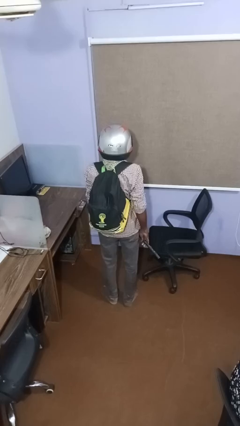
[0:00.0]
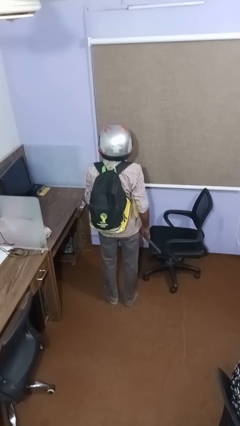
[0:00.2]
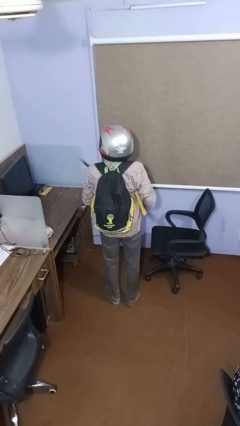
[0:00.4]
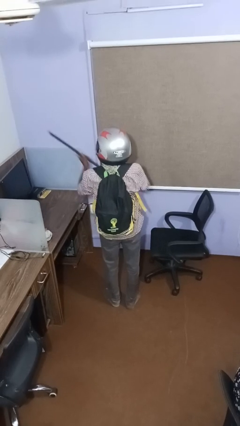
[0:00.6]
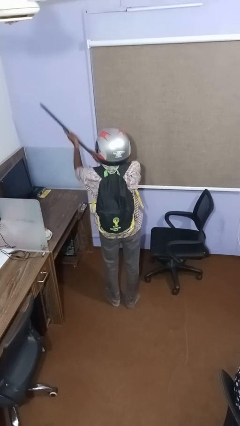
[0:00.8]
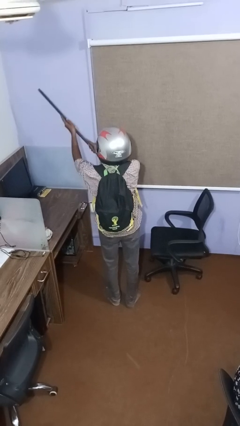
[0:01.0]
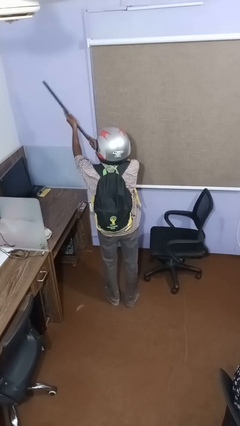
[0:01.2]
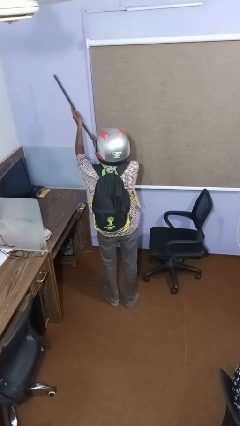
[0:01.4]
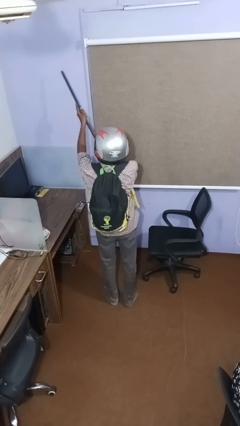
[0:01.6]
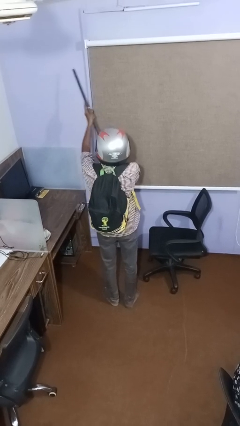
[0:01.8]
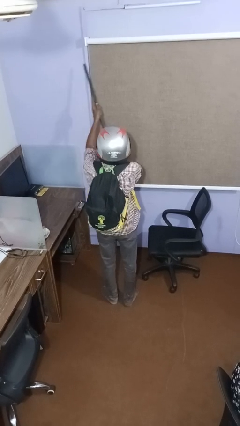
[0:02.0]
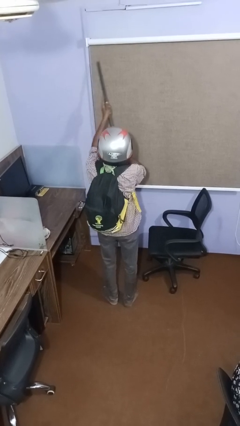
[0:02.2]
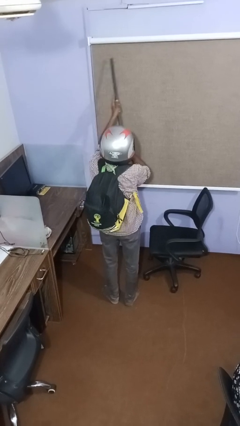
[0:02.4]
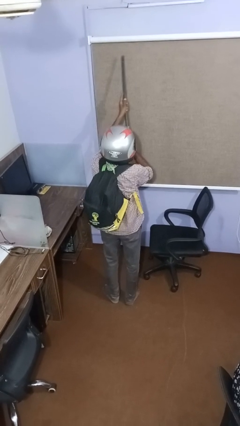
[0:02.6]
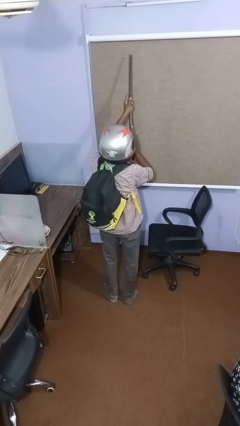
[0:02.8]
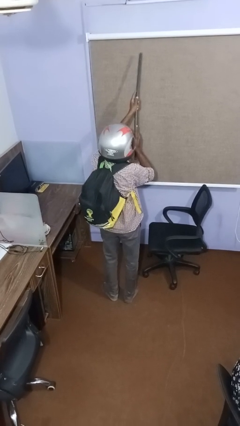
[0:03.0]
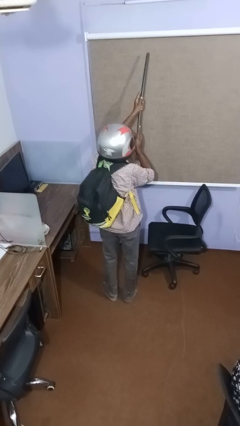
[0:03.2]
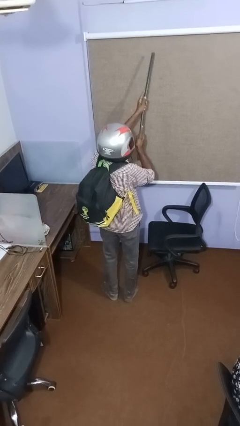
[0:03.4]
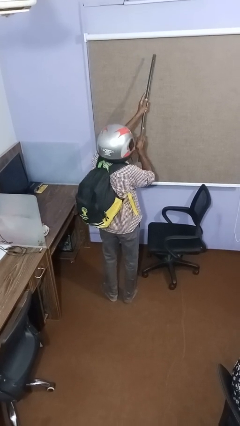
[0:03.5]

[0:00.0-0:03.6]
person swats bug

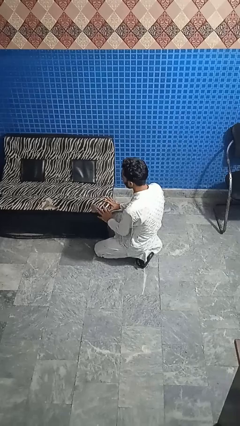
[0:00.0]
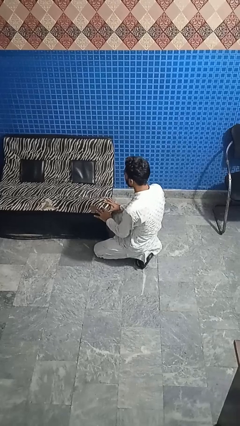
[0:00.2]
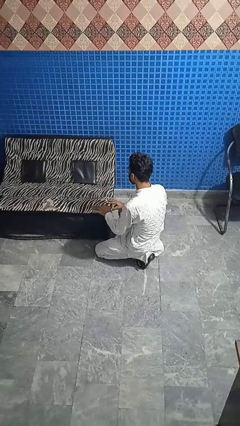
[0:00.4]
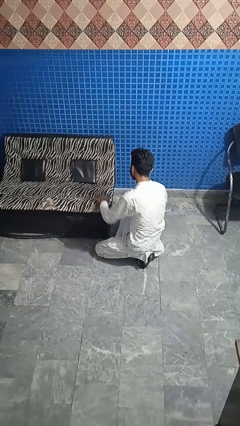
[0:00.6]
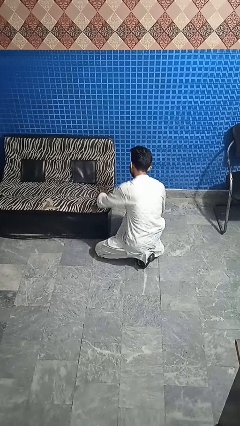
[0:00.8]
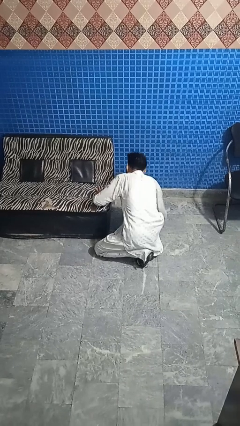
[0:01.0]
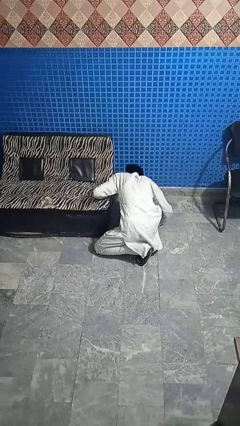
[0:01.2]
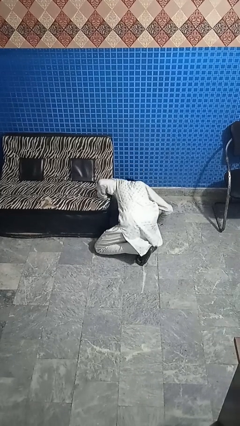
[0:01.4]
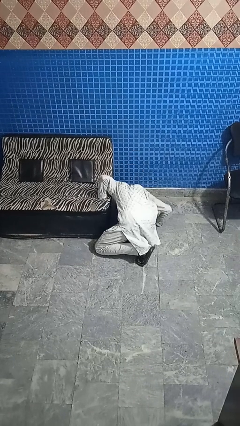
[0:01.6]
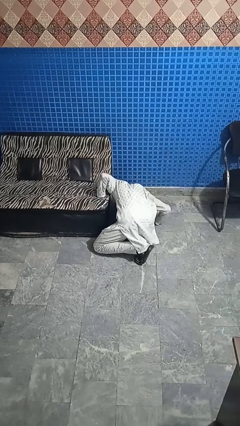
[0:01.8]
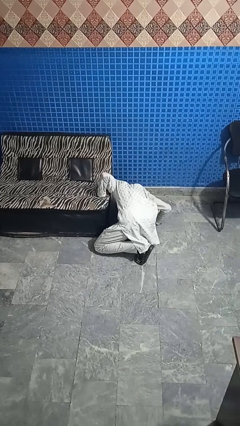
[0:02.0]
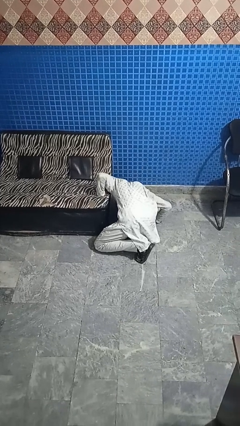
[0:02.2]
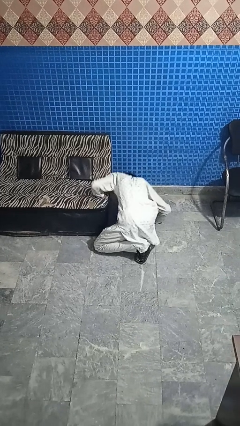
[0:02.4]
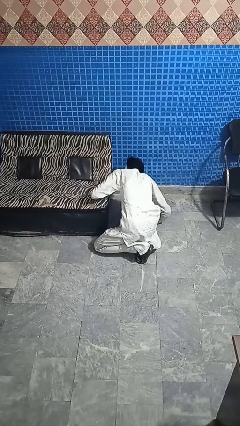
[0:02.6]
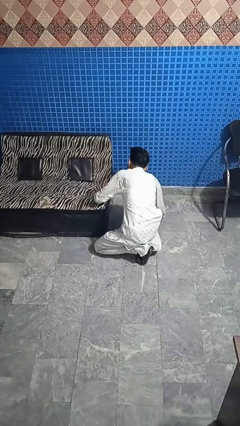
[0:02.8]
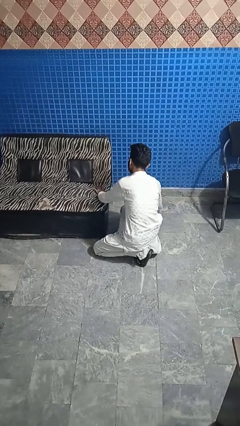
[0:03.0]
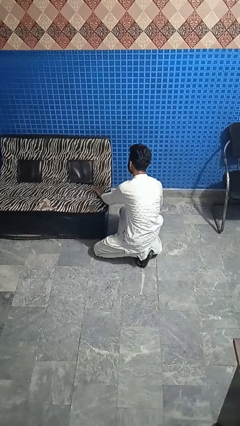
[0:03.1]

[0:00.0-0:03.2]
person searches under couch

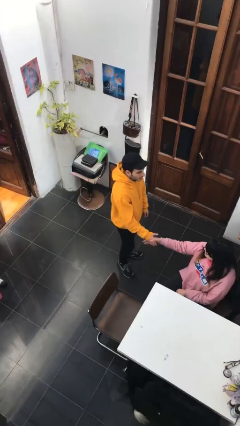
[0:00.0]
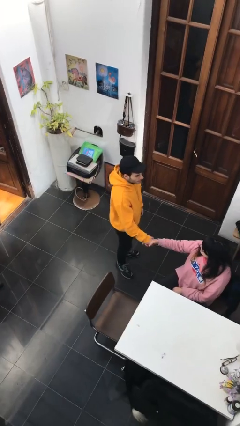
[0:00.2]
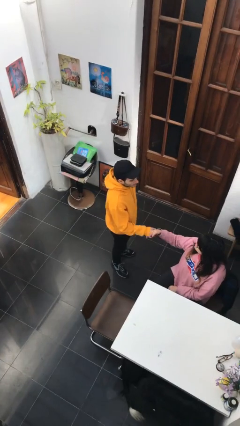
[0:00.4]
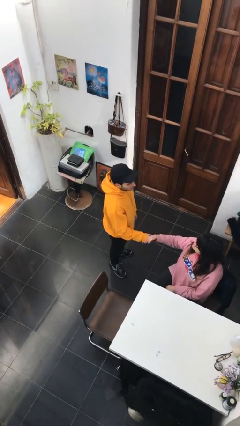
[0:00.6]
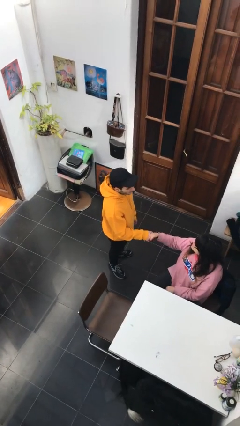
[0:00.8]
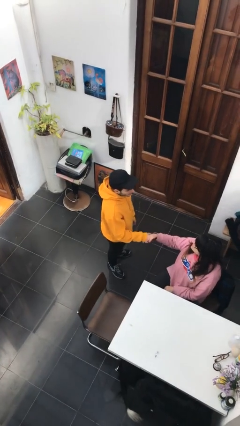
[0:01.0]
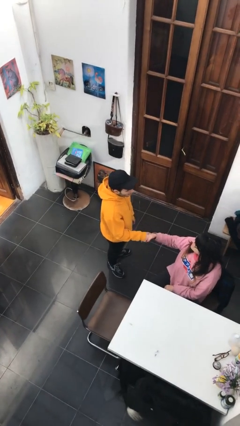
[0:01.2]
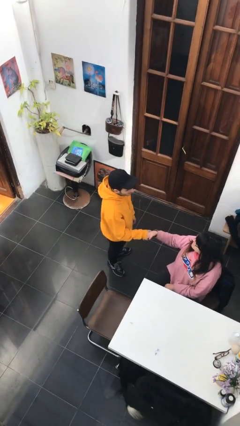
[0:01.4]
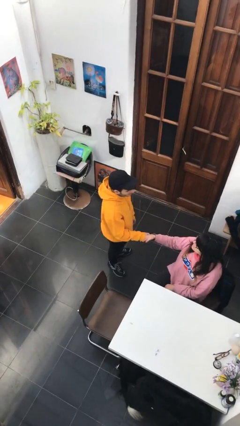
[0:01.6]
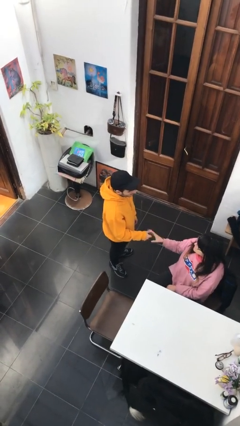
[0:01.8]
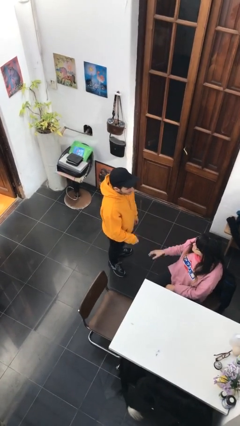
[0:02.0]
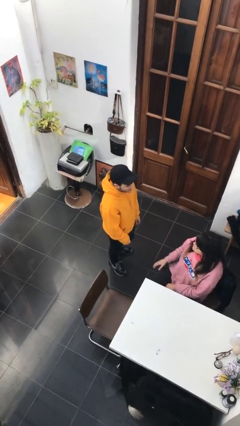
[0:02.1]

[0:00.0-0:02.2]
person shakes hand

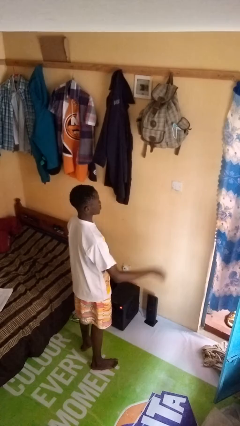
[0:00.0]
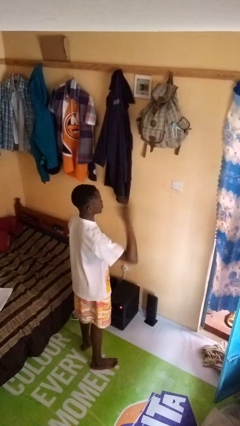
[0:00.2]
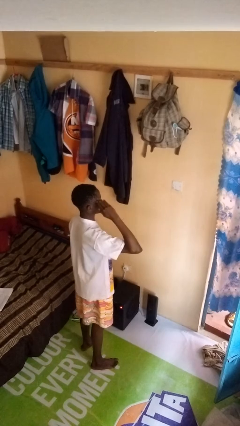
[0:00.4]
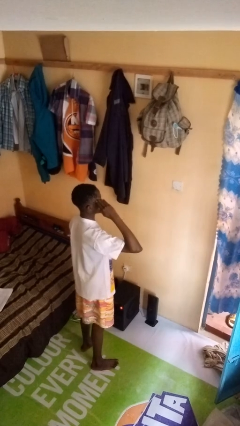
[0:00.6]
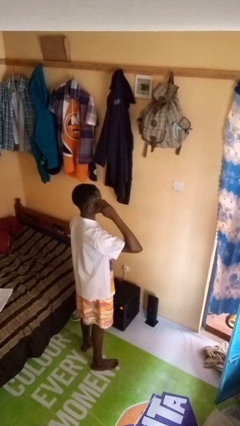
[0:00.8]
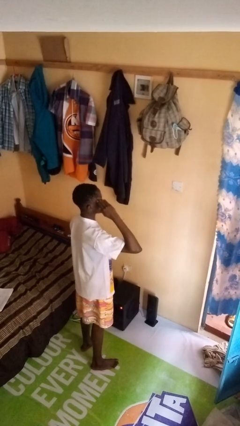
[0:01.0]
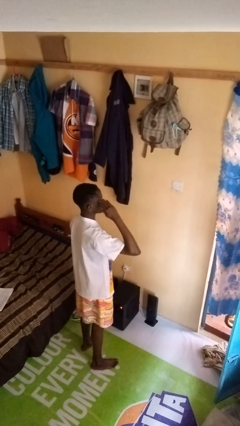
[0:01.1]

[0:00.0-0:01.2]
person salutes

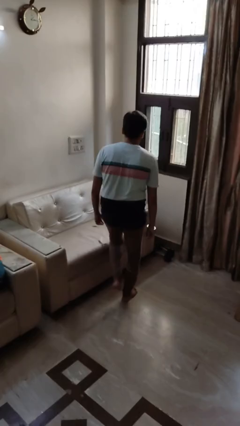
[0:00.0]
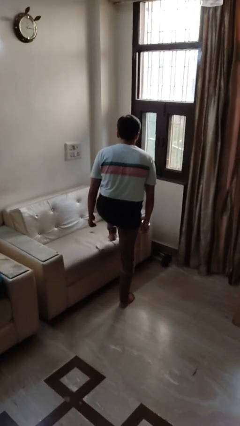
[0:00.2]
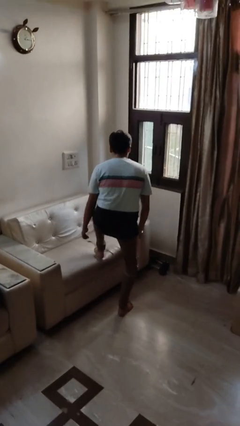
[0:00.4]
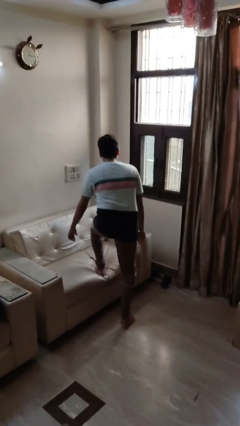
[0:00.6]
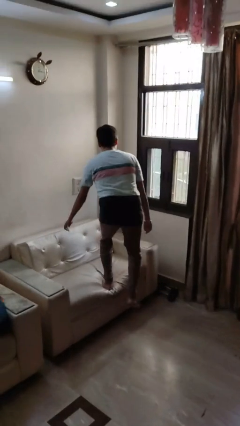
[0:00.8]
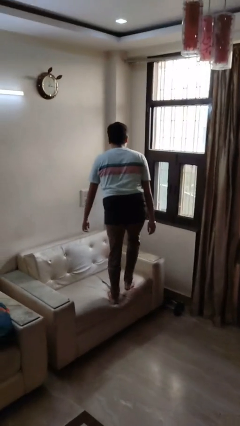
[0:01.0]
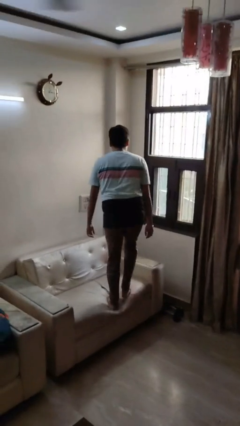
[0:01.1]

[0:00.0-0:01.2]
person climbs on couch

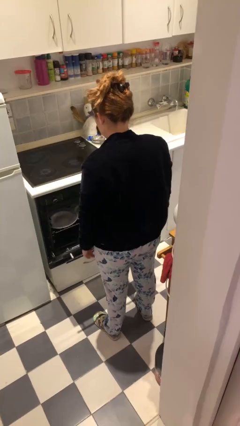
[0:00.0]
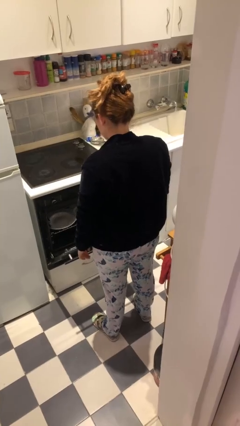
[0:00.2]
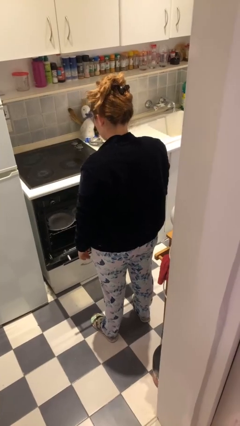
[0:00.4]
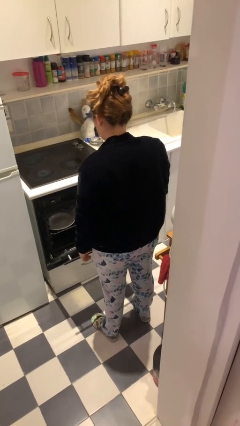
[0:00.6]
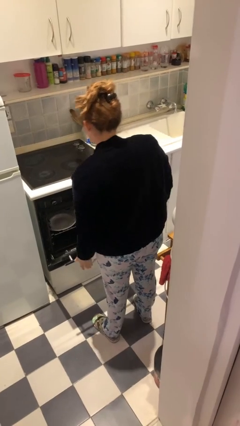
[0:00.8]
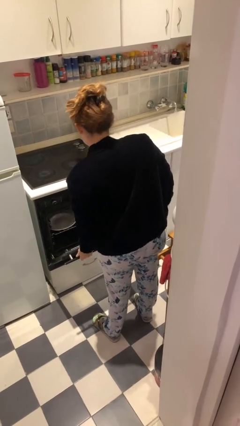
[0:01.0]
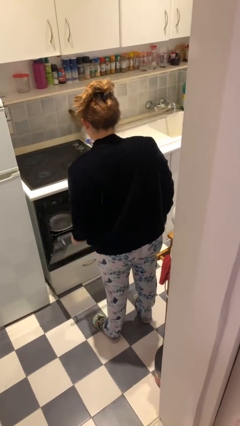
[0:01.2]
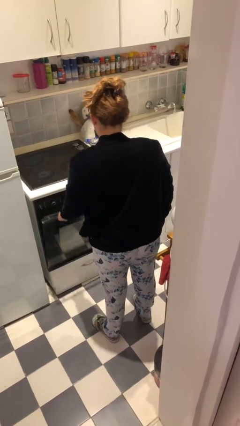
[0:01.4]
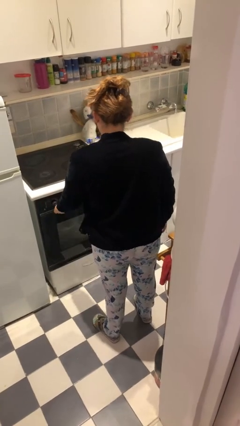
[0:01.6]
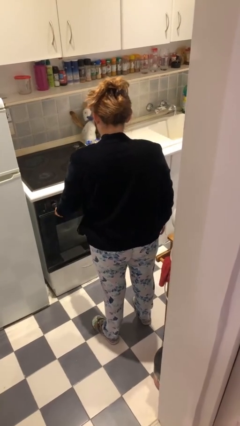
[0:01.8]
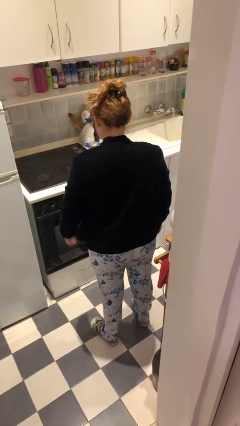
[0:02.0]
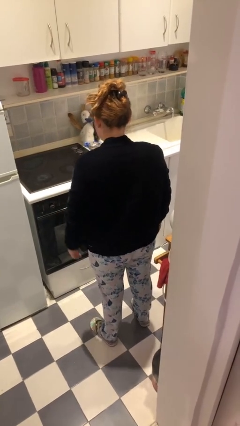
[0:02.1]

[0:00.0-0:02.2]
person closes dishwasher

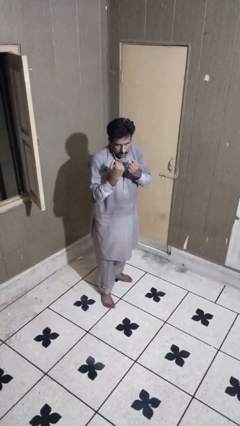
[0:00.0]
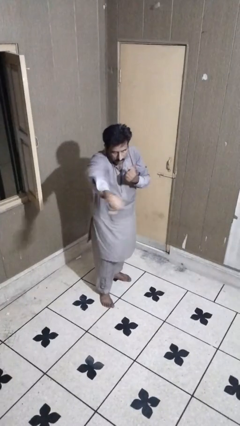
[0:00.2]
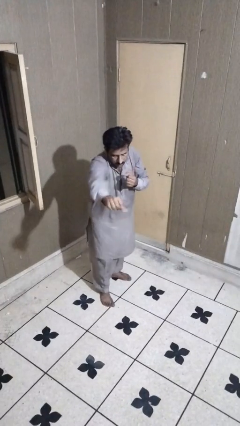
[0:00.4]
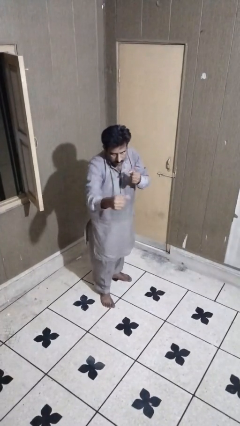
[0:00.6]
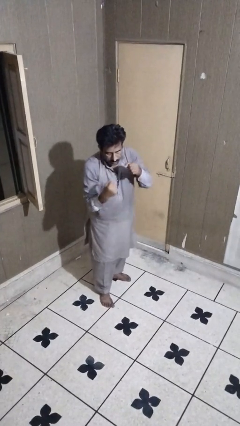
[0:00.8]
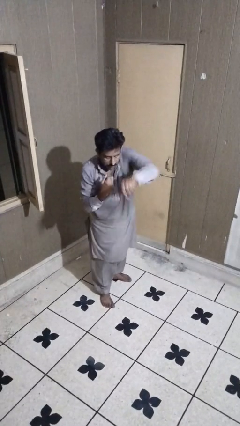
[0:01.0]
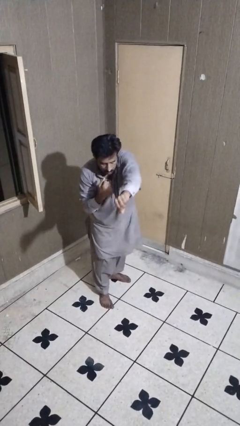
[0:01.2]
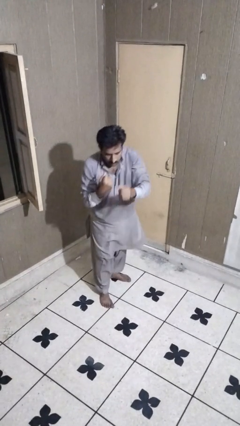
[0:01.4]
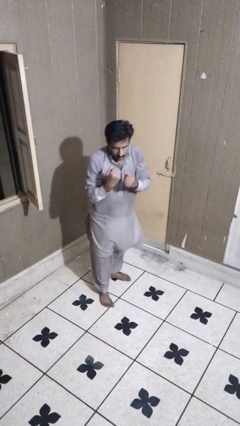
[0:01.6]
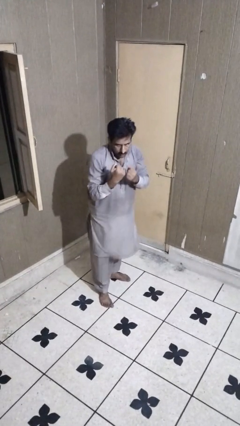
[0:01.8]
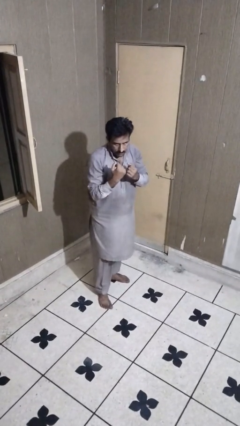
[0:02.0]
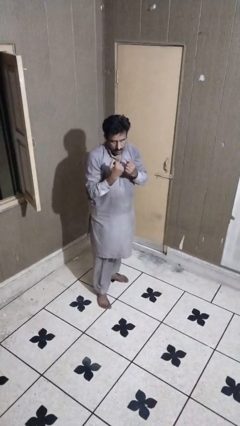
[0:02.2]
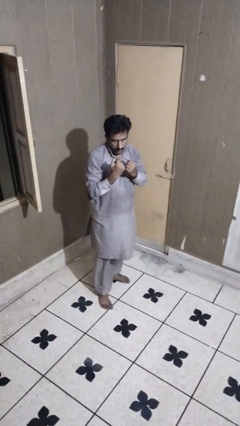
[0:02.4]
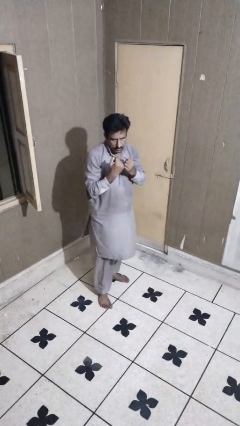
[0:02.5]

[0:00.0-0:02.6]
person punches

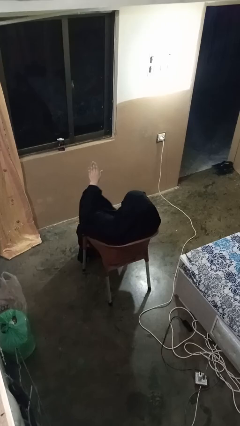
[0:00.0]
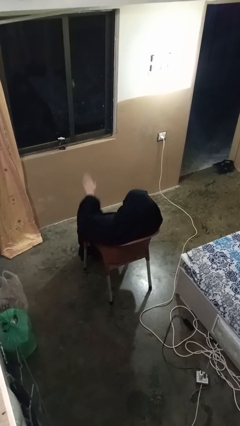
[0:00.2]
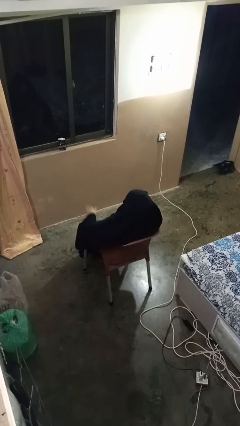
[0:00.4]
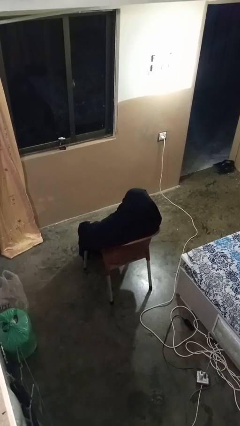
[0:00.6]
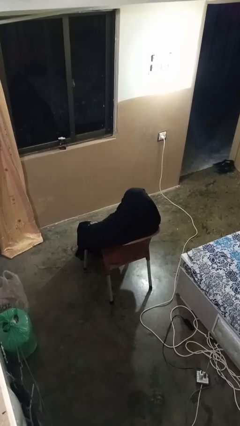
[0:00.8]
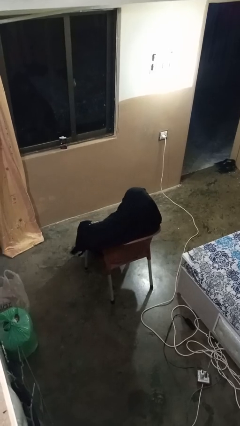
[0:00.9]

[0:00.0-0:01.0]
person gestures lower hand
